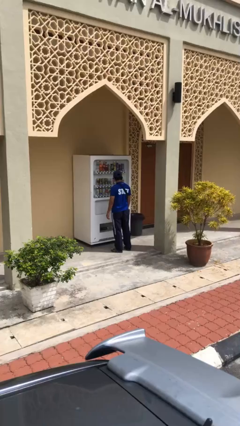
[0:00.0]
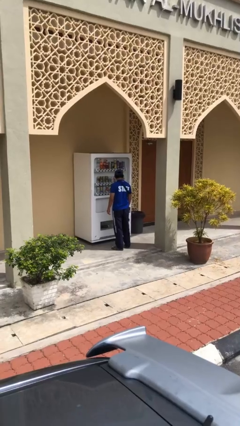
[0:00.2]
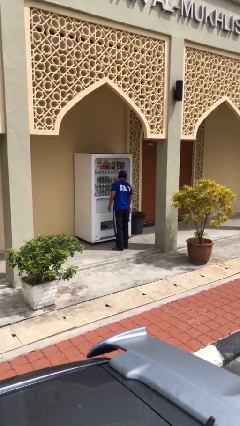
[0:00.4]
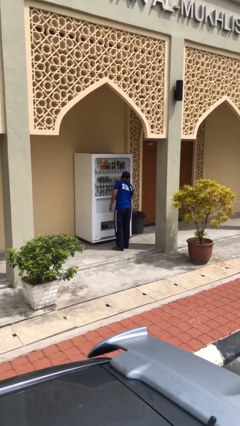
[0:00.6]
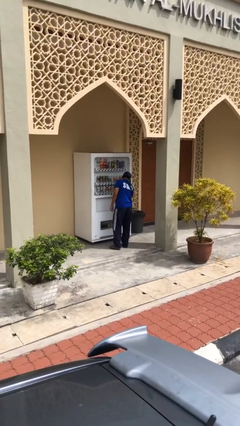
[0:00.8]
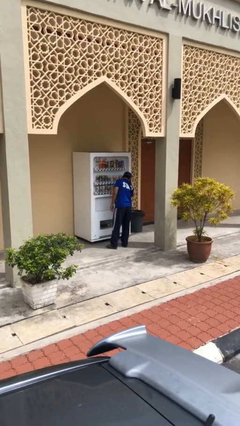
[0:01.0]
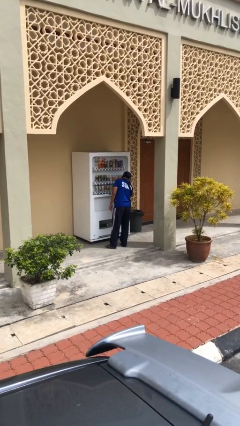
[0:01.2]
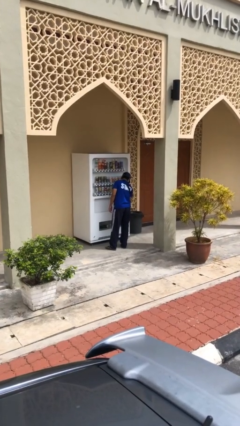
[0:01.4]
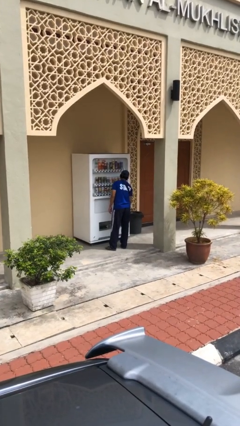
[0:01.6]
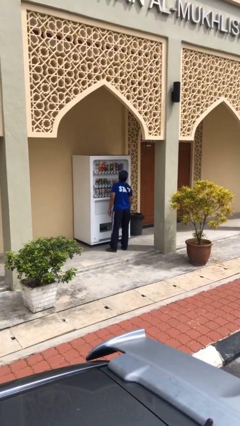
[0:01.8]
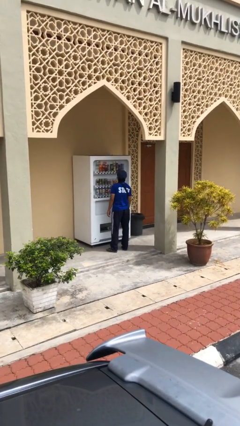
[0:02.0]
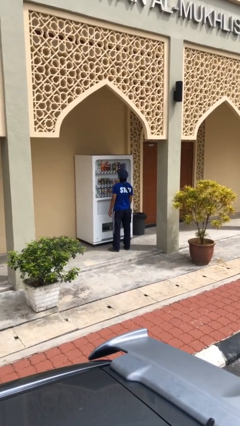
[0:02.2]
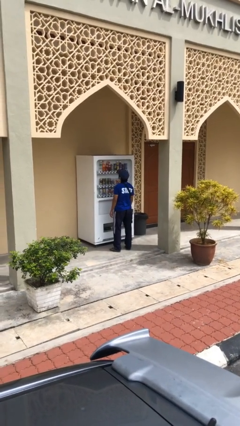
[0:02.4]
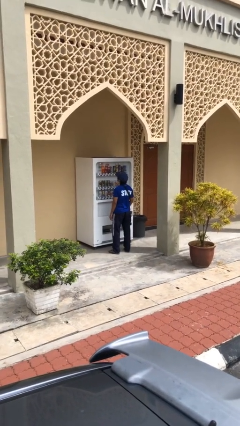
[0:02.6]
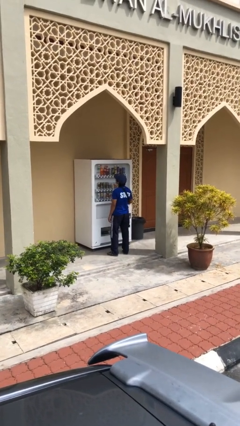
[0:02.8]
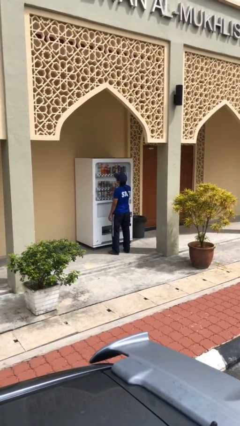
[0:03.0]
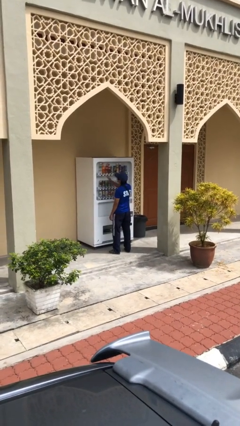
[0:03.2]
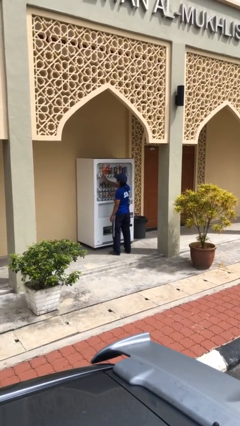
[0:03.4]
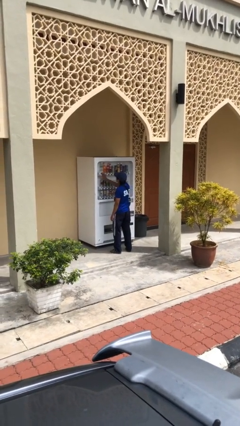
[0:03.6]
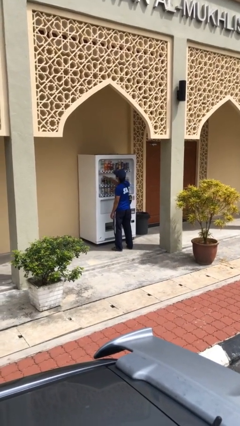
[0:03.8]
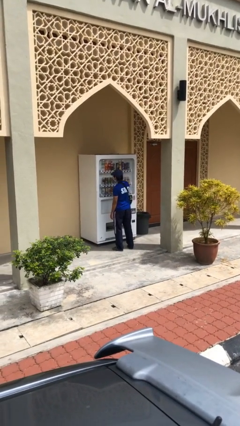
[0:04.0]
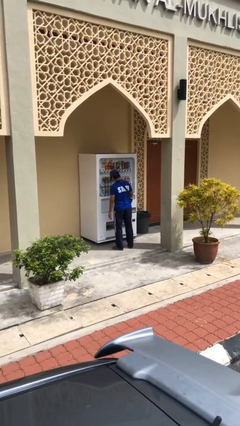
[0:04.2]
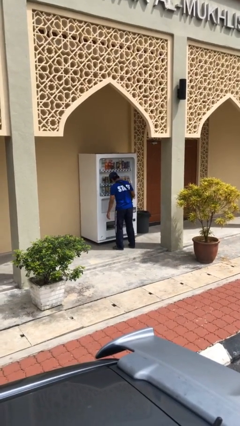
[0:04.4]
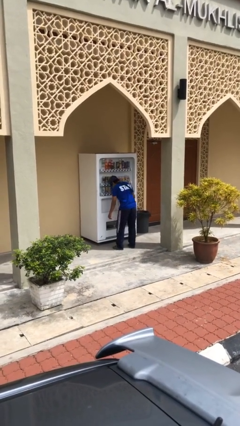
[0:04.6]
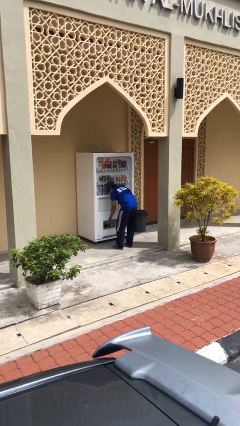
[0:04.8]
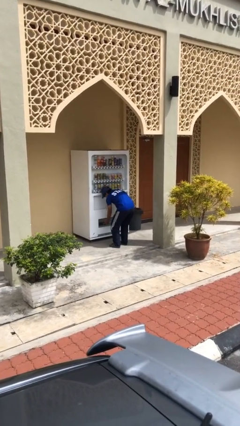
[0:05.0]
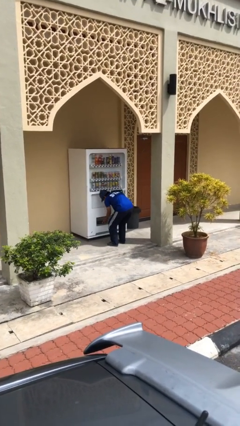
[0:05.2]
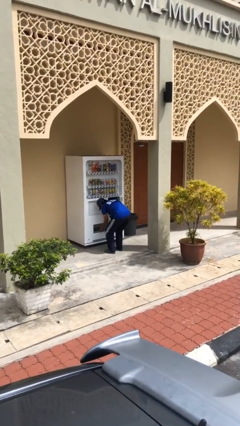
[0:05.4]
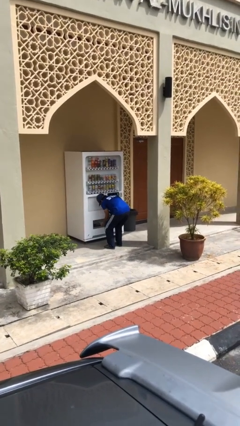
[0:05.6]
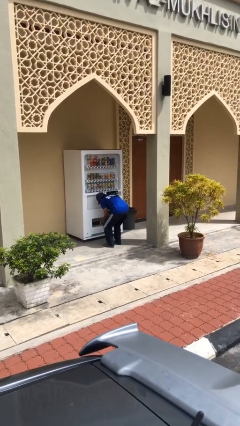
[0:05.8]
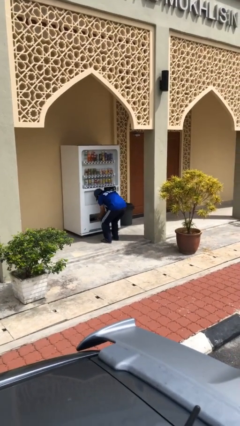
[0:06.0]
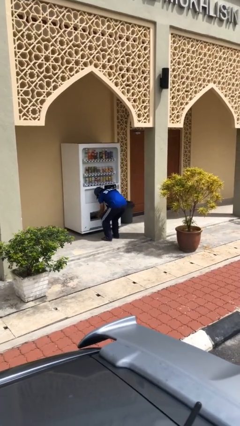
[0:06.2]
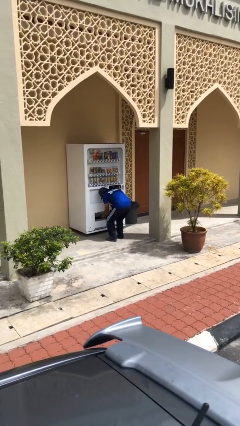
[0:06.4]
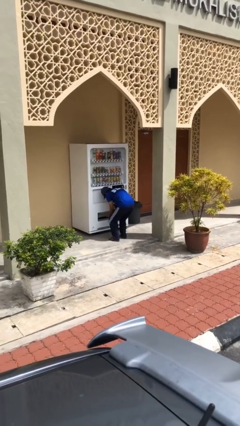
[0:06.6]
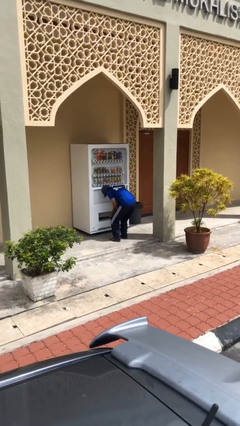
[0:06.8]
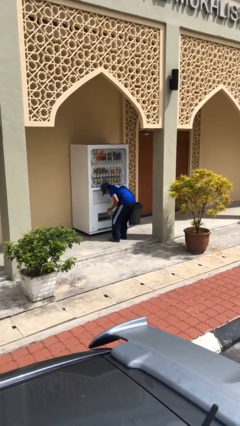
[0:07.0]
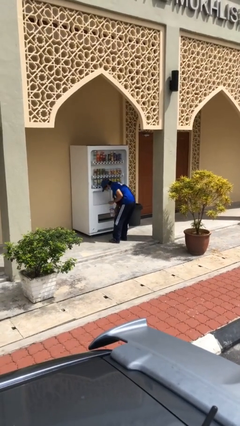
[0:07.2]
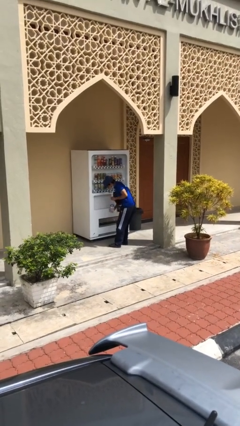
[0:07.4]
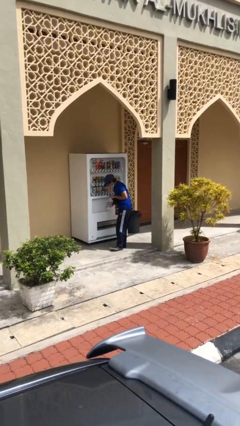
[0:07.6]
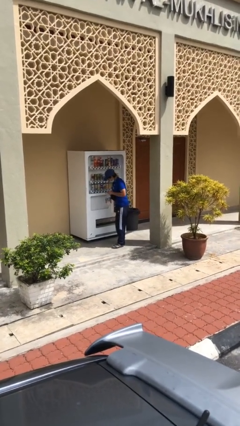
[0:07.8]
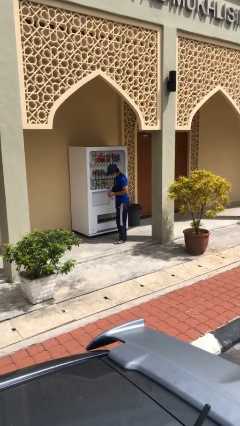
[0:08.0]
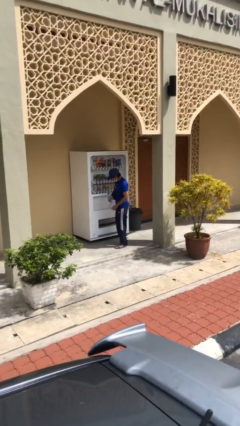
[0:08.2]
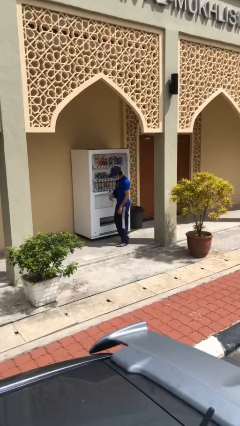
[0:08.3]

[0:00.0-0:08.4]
person purchases from machine

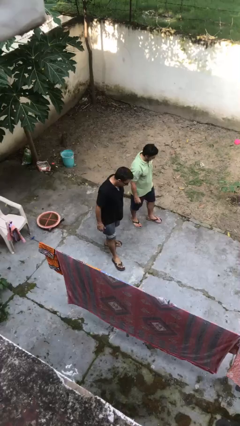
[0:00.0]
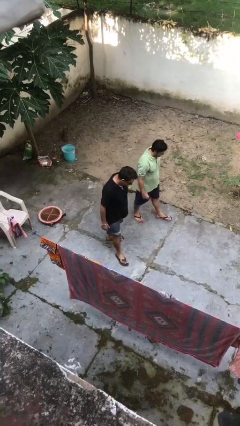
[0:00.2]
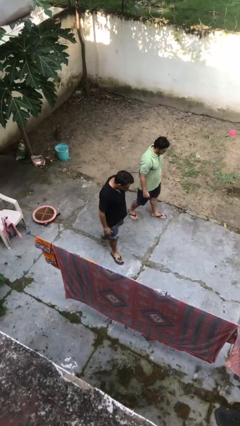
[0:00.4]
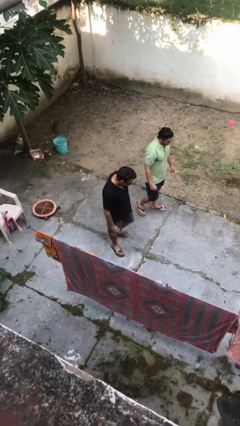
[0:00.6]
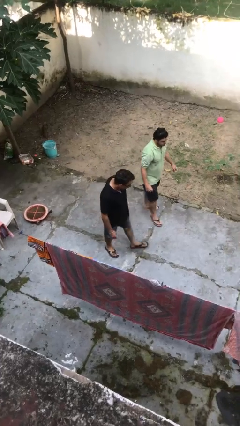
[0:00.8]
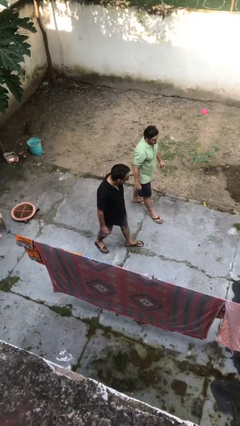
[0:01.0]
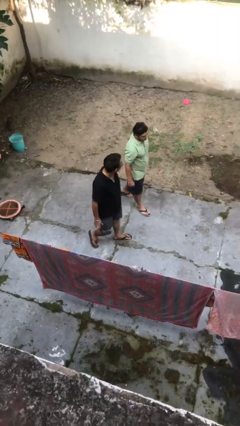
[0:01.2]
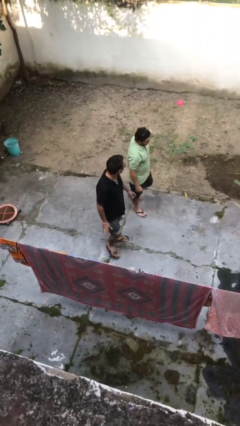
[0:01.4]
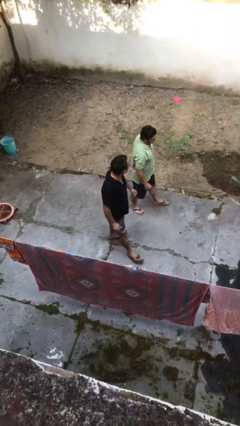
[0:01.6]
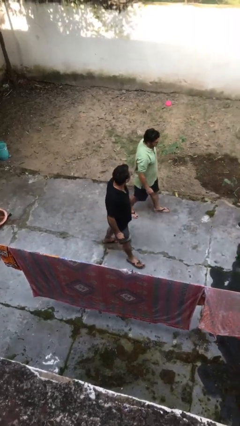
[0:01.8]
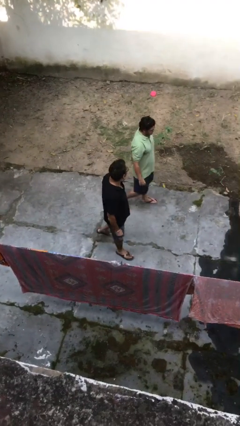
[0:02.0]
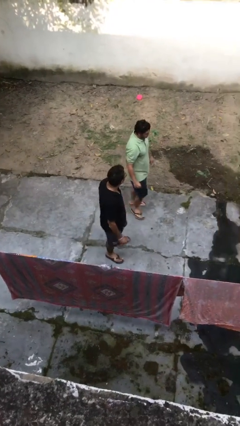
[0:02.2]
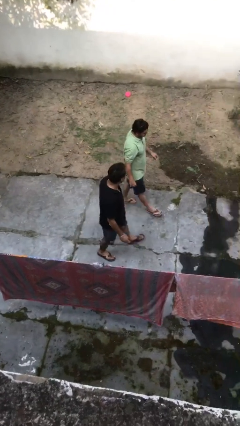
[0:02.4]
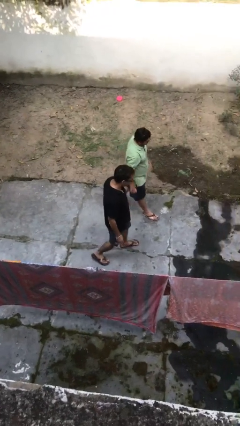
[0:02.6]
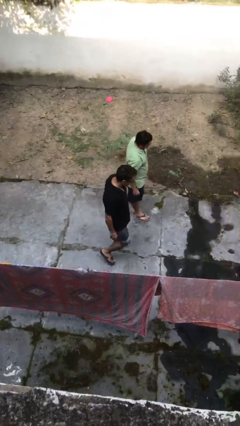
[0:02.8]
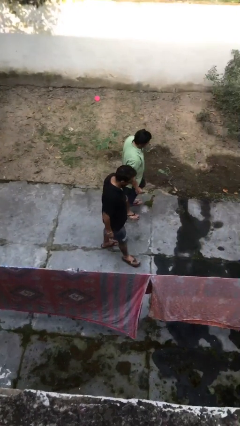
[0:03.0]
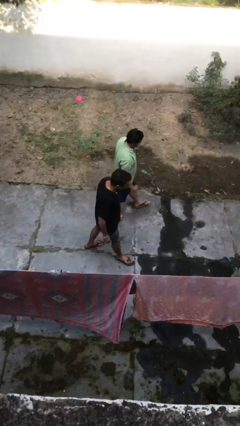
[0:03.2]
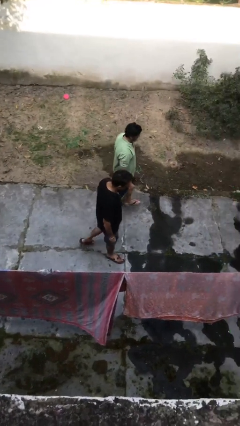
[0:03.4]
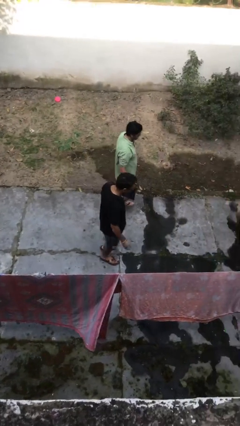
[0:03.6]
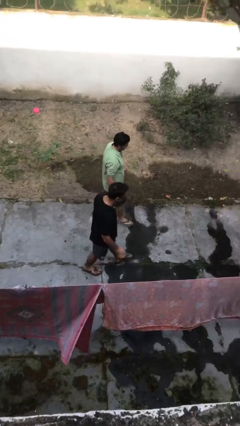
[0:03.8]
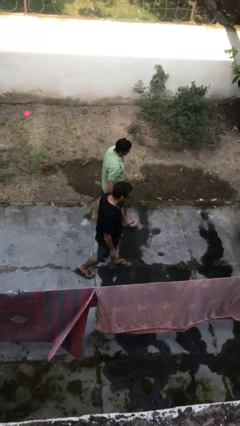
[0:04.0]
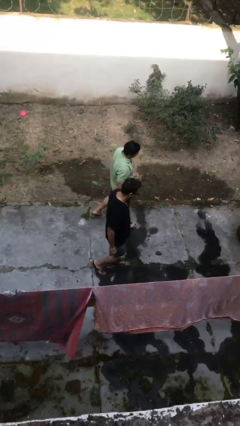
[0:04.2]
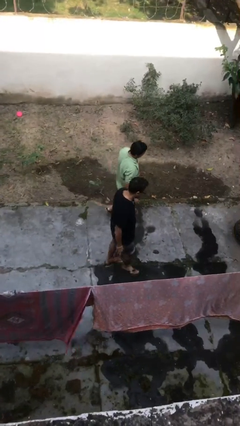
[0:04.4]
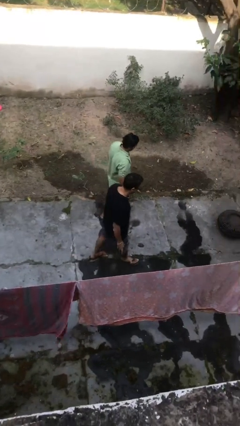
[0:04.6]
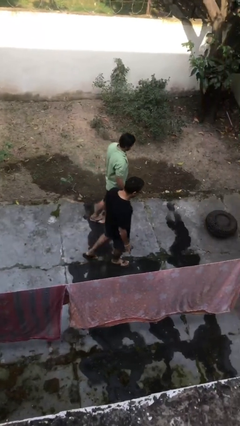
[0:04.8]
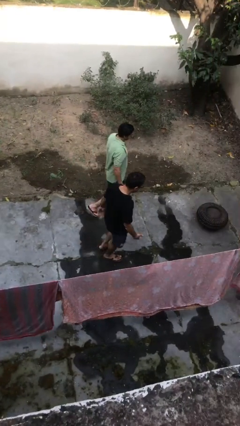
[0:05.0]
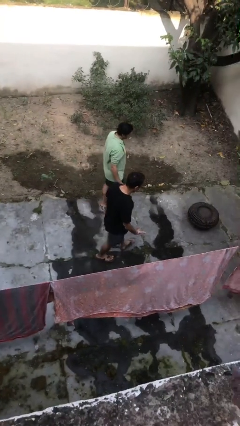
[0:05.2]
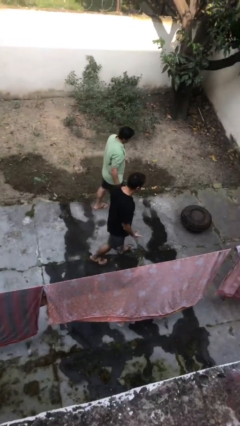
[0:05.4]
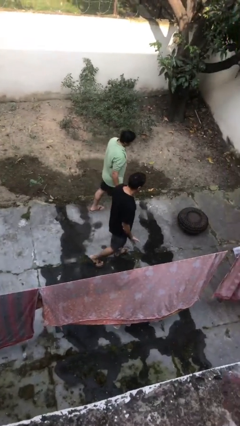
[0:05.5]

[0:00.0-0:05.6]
person talks to person

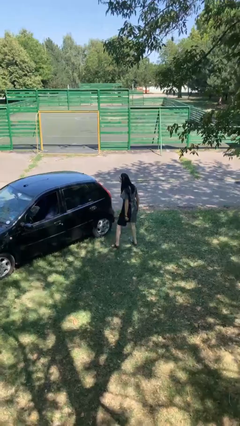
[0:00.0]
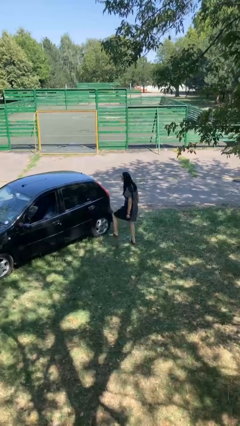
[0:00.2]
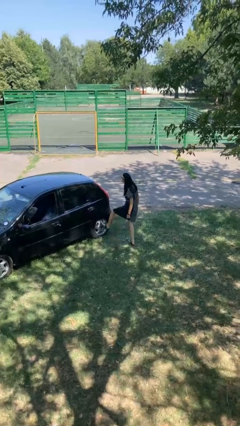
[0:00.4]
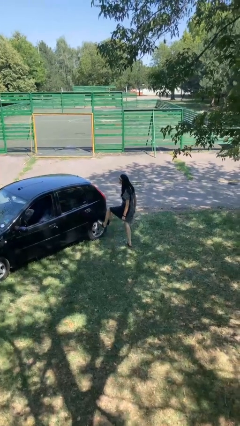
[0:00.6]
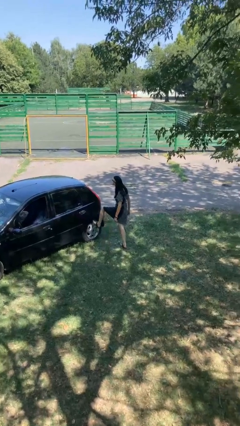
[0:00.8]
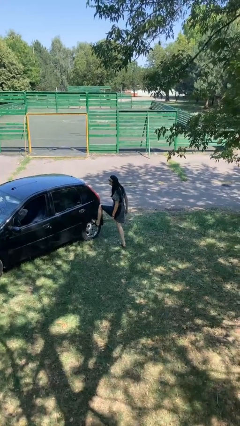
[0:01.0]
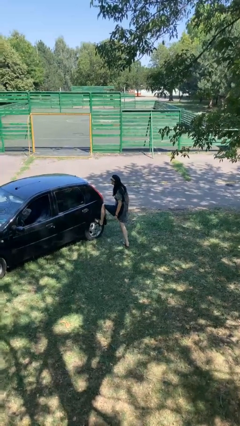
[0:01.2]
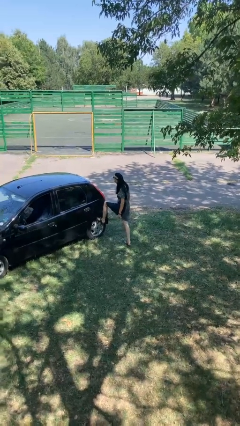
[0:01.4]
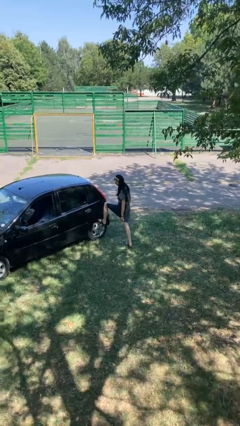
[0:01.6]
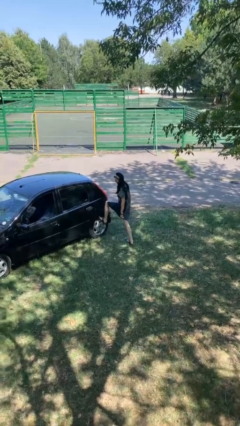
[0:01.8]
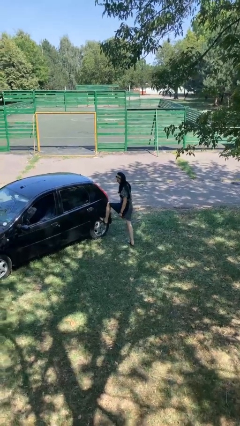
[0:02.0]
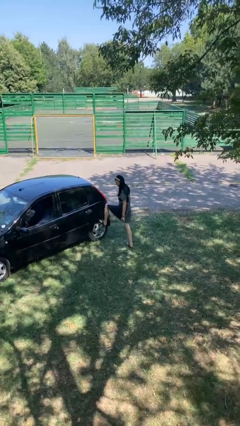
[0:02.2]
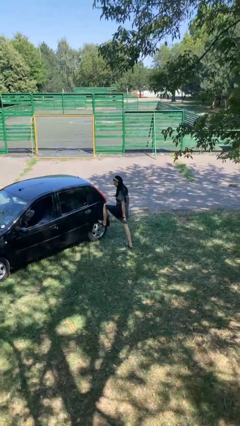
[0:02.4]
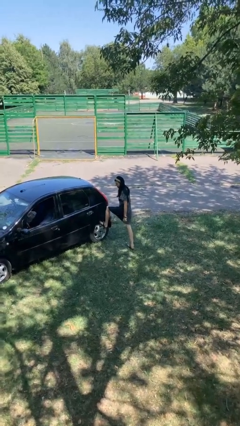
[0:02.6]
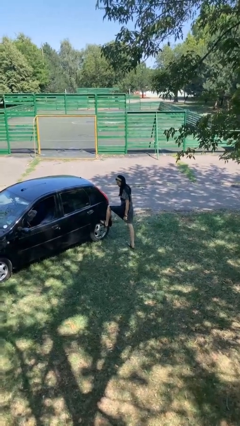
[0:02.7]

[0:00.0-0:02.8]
person kicks car tires

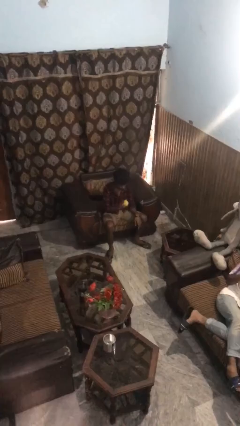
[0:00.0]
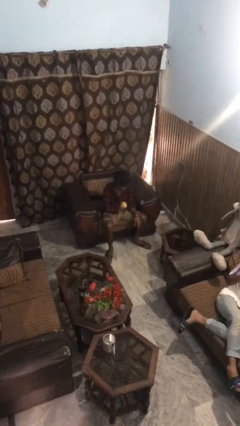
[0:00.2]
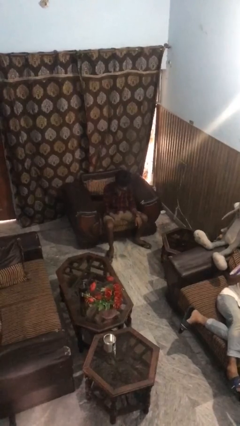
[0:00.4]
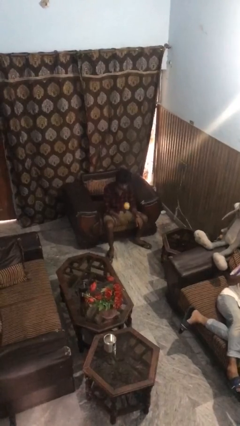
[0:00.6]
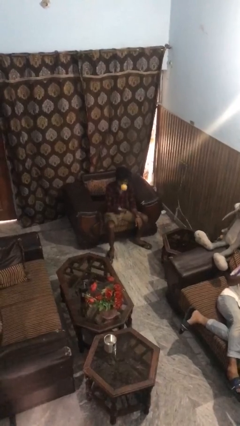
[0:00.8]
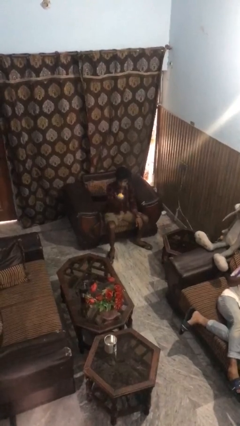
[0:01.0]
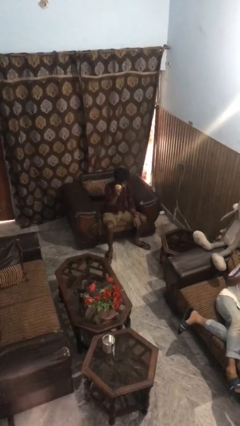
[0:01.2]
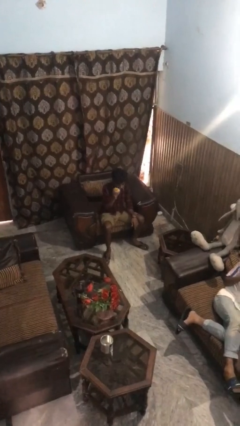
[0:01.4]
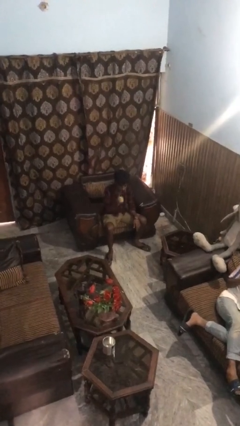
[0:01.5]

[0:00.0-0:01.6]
person bounces ball on floor
